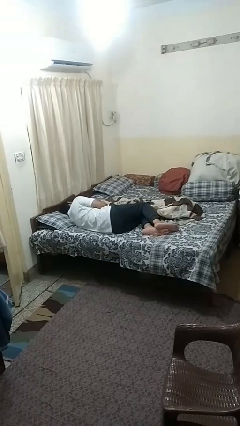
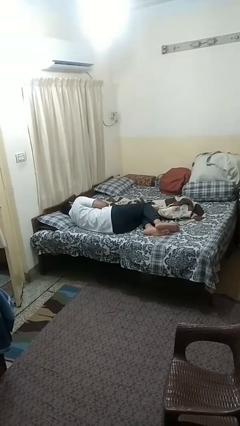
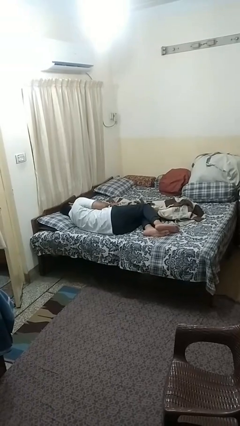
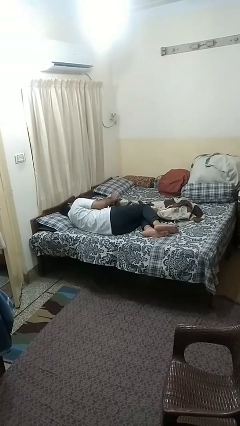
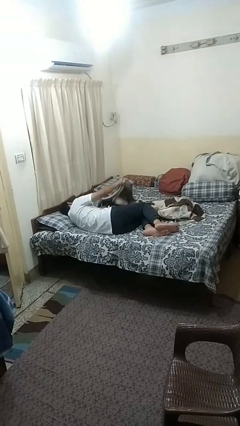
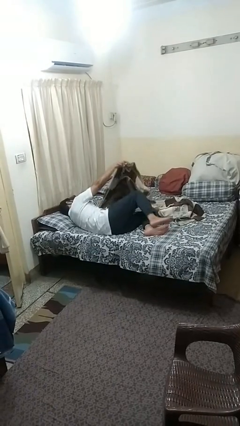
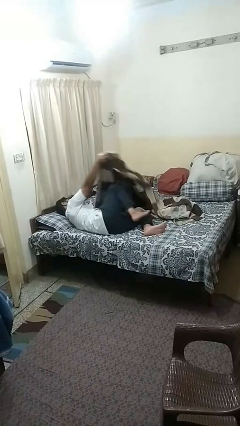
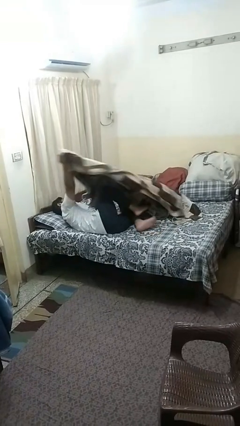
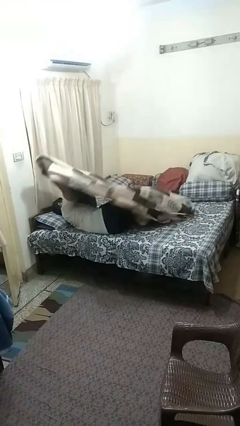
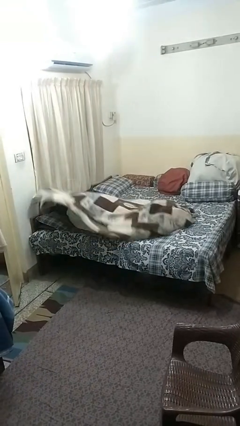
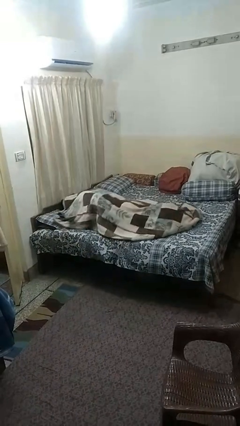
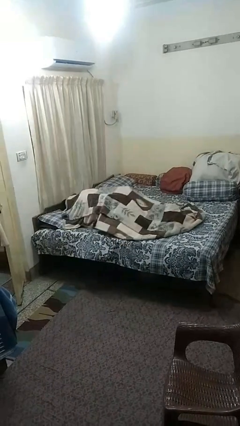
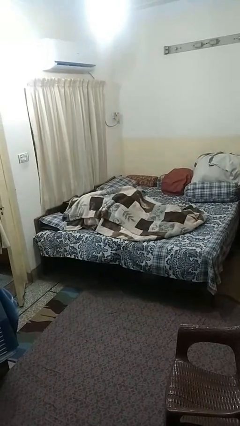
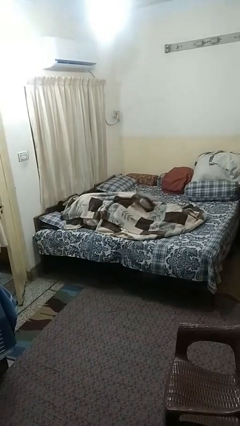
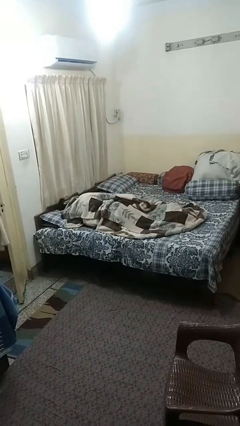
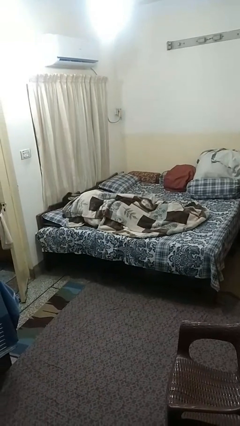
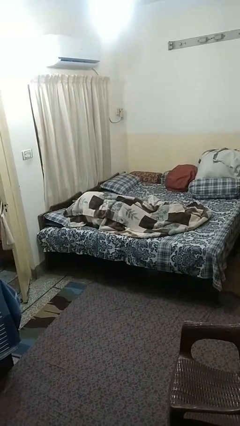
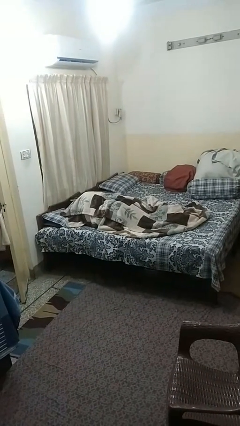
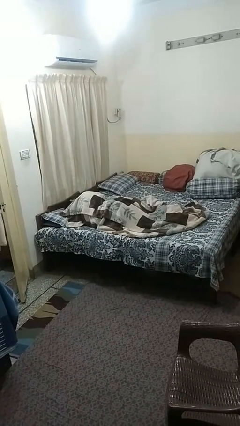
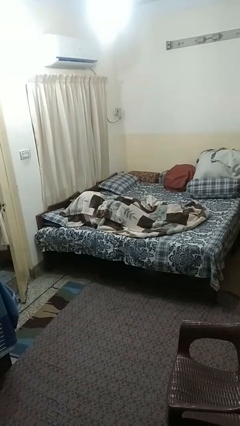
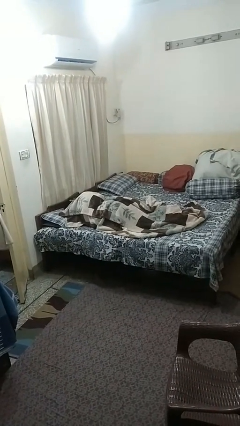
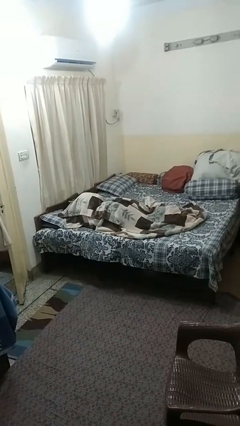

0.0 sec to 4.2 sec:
person covers with blanket

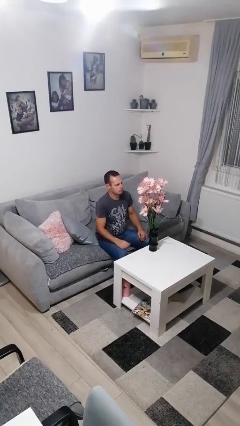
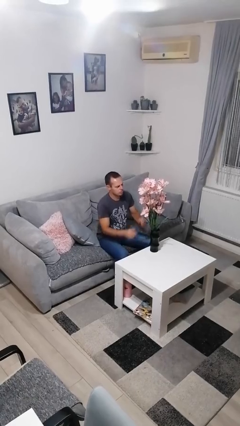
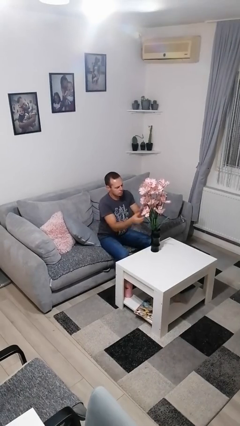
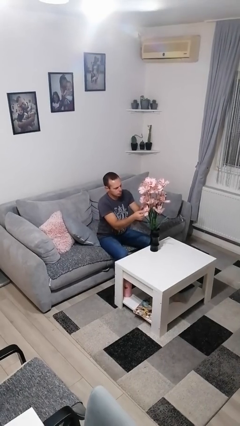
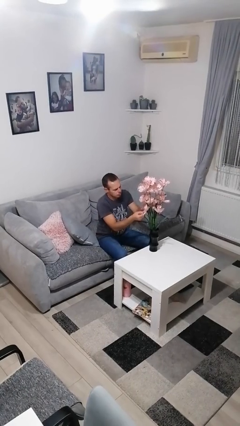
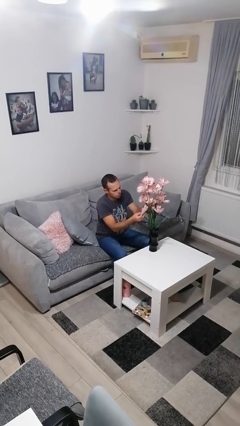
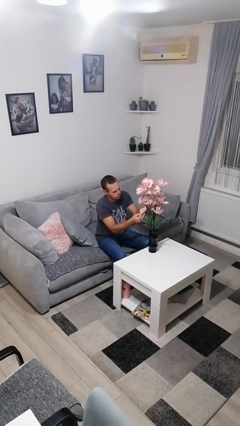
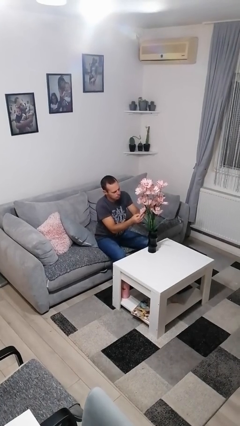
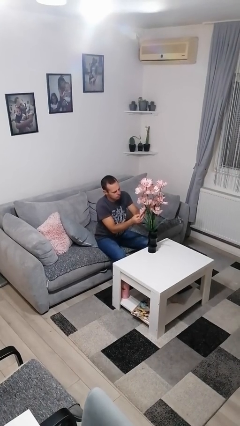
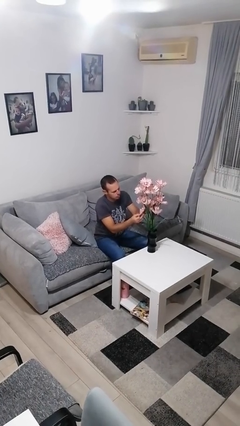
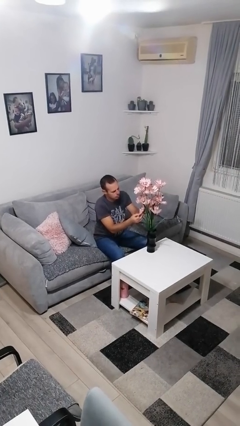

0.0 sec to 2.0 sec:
person arranges flowers in vase

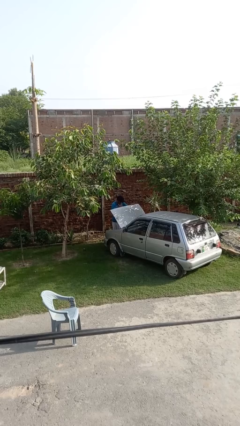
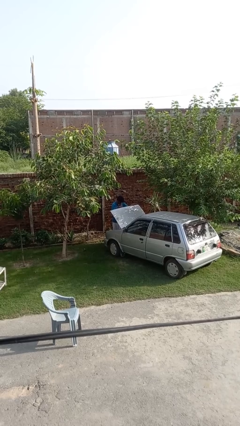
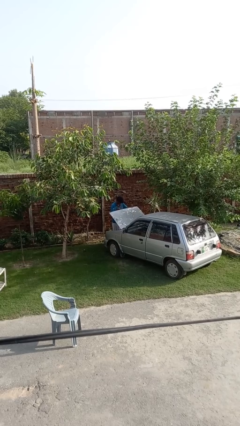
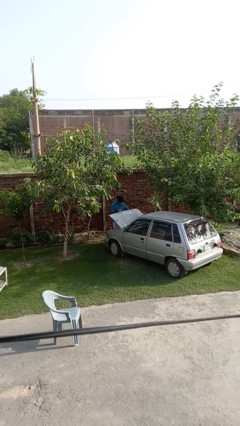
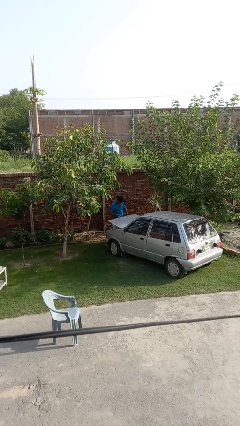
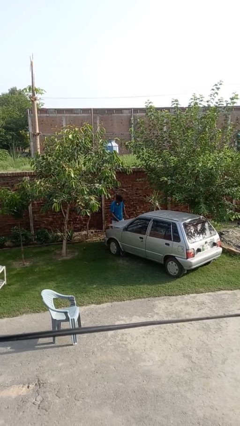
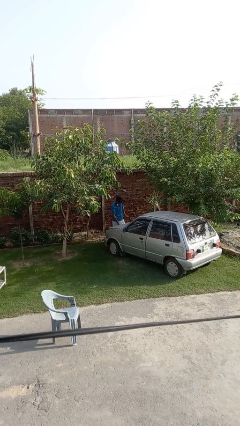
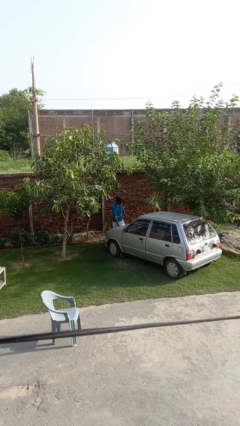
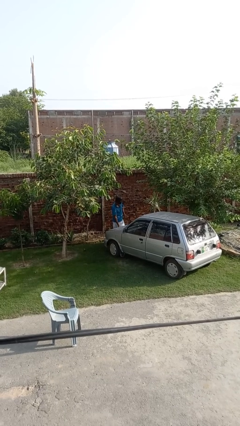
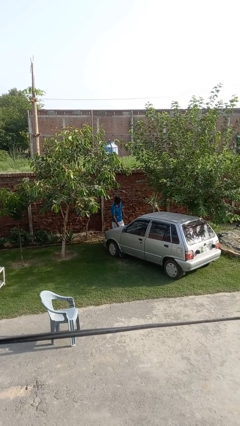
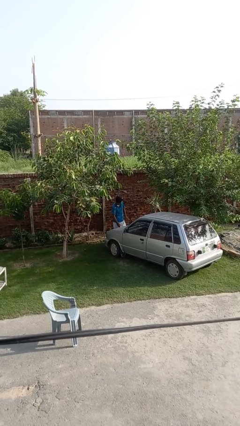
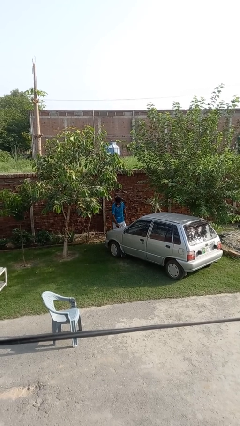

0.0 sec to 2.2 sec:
person closes car hood

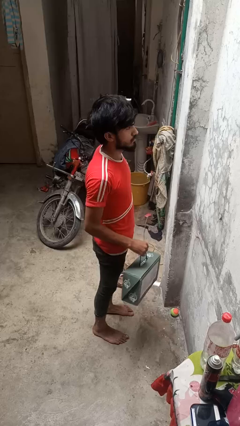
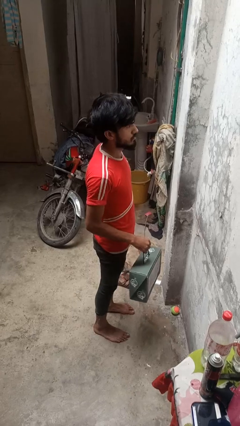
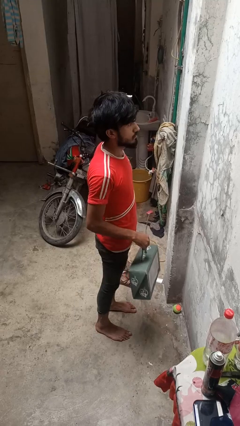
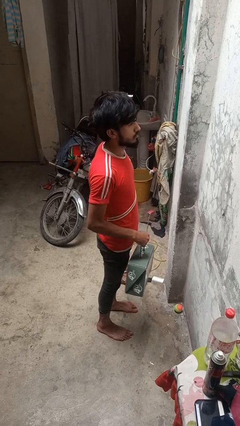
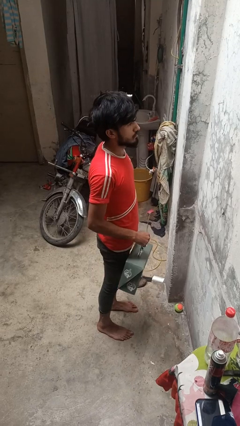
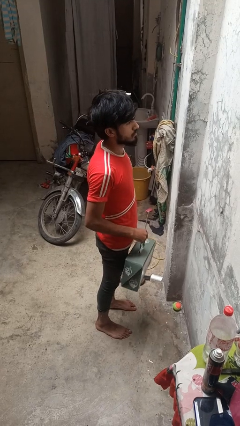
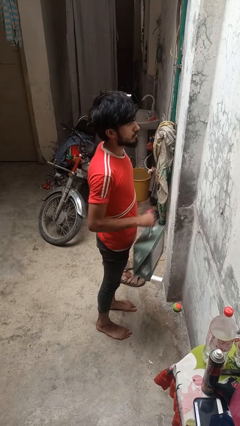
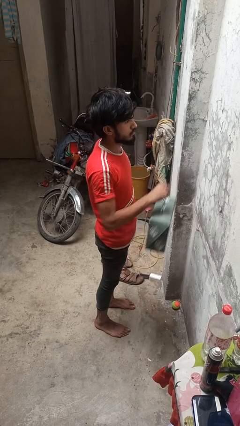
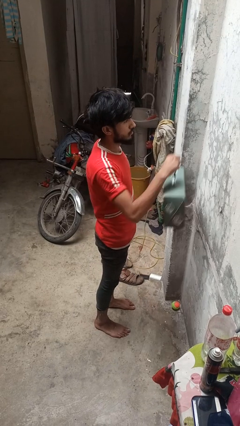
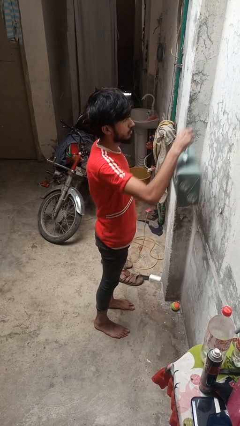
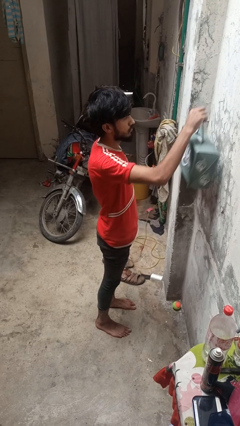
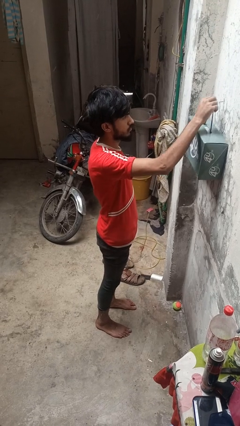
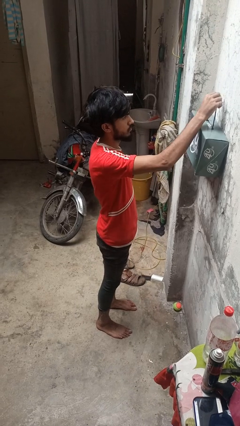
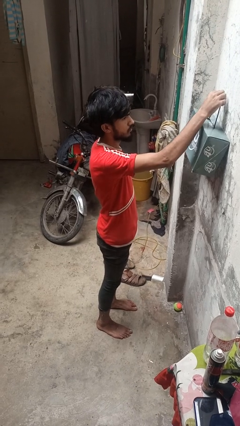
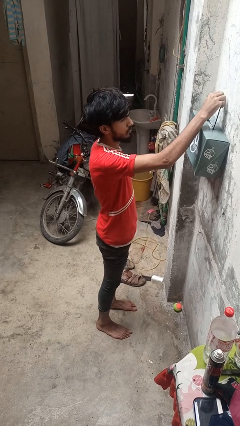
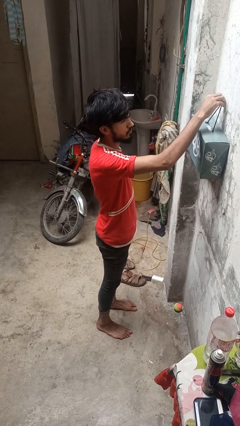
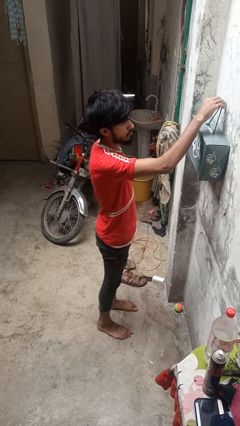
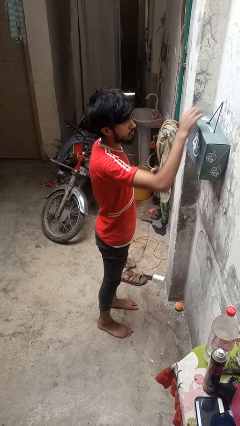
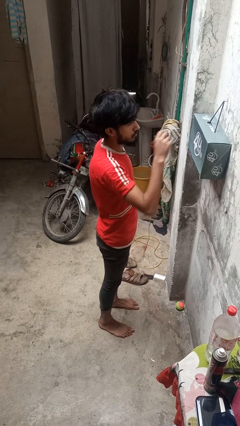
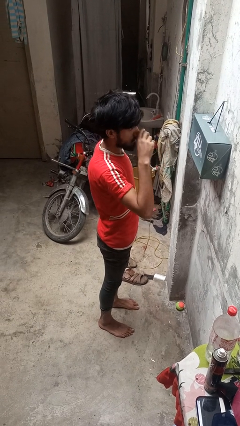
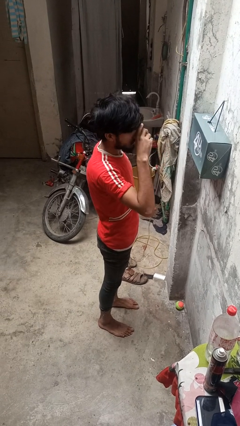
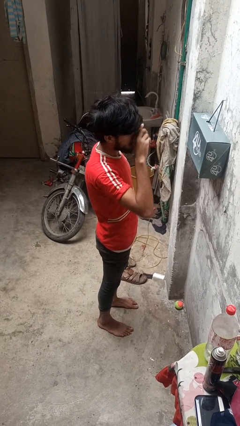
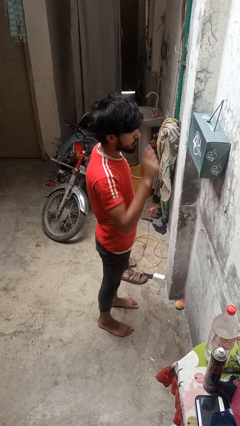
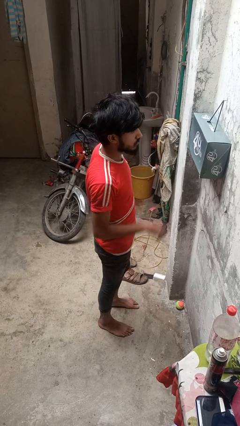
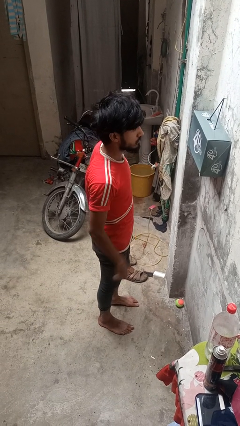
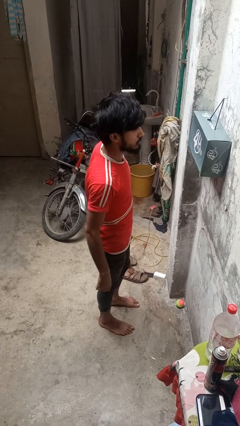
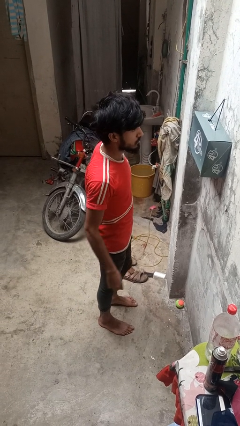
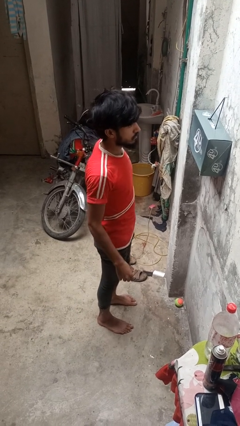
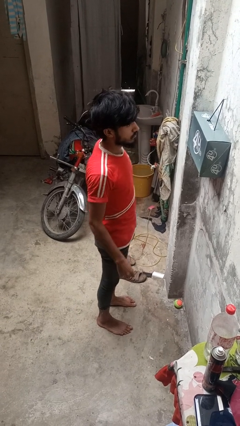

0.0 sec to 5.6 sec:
person puts up smoke detector

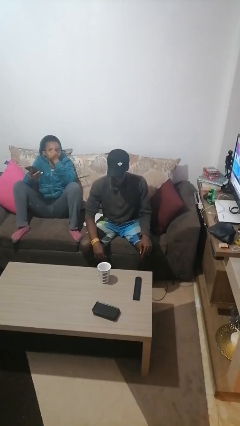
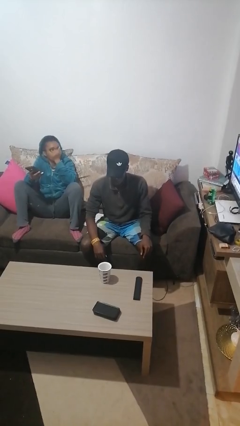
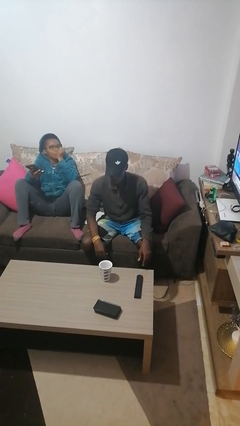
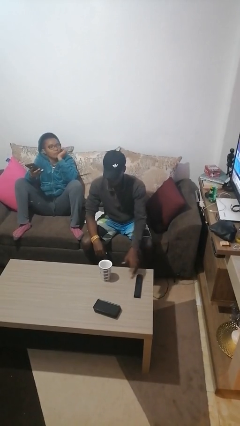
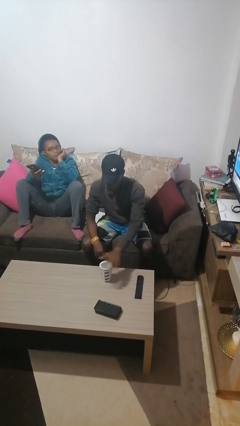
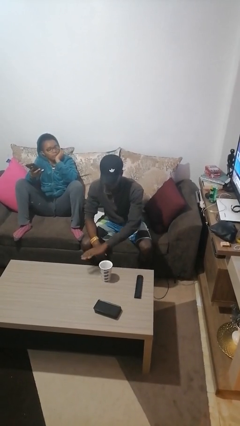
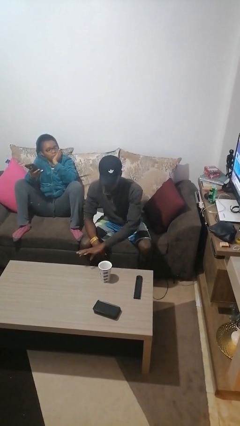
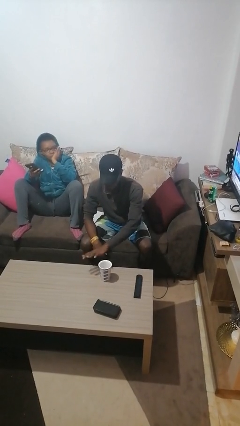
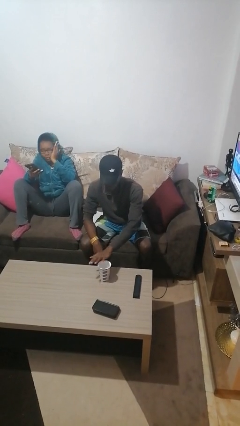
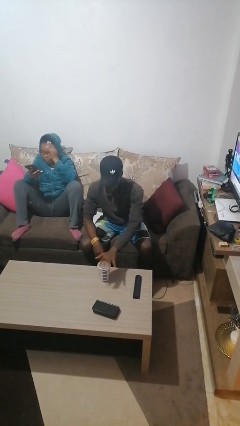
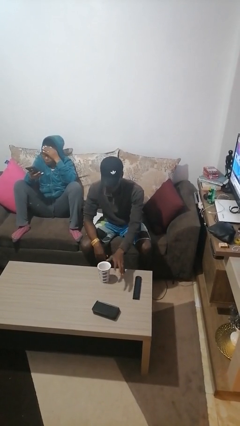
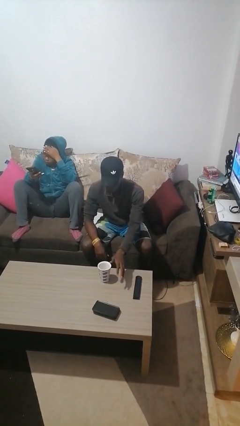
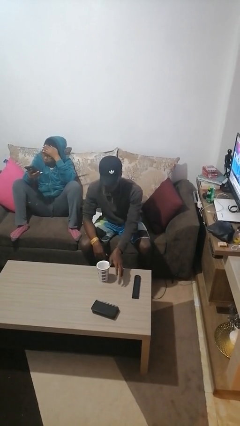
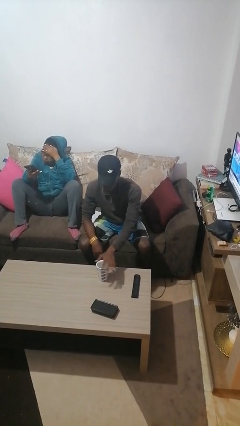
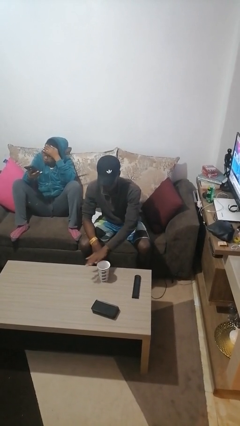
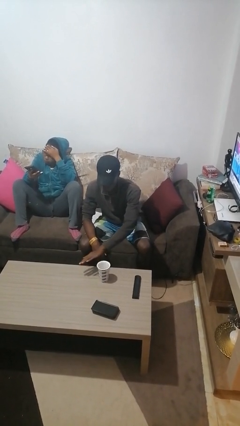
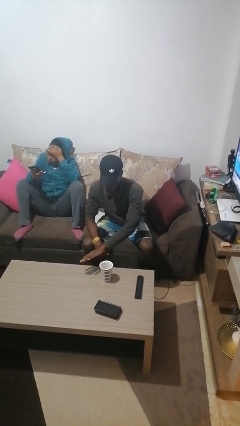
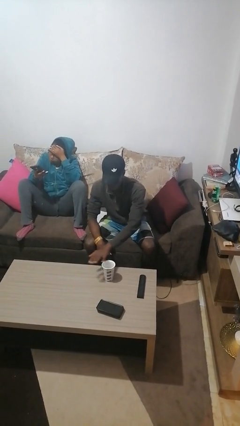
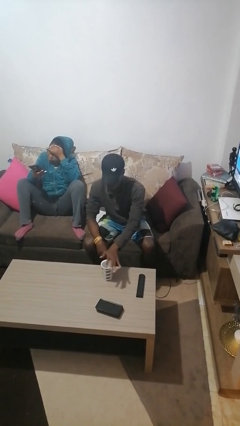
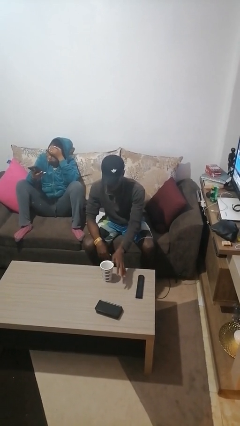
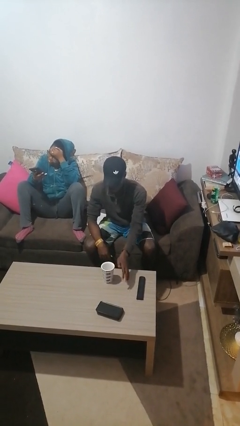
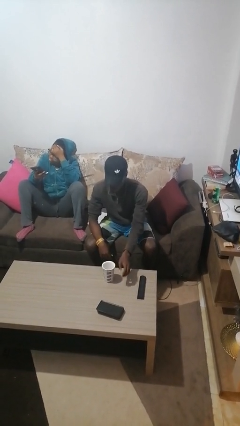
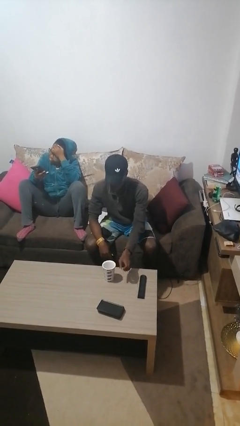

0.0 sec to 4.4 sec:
person waves hand over object
